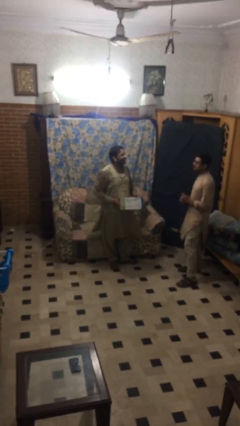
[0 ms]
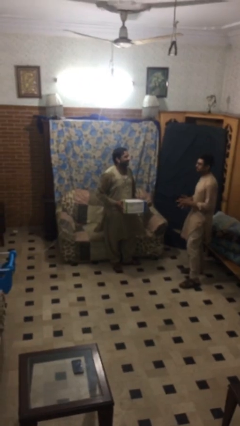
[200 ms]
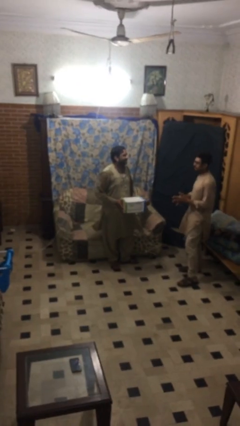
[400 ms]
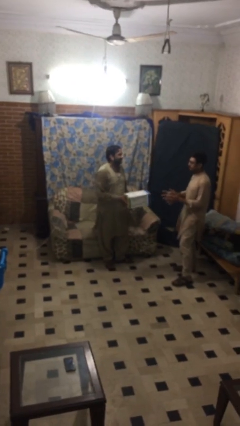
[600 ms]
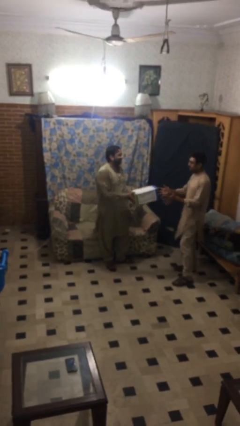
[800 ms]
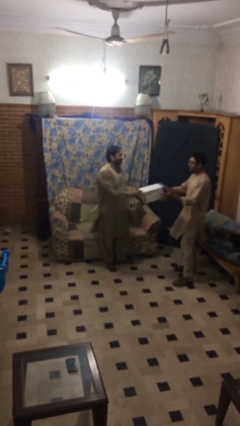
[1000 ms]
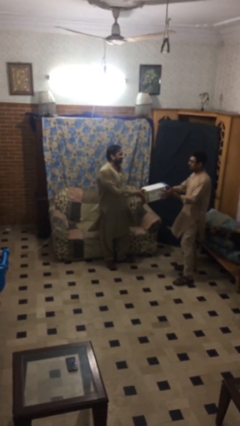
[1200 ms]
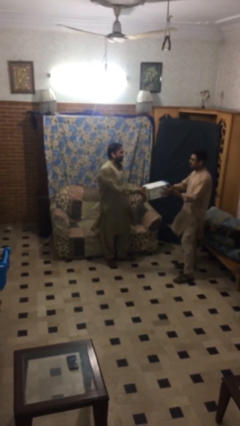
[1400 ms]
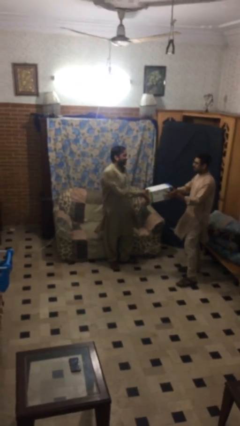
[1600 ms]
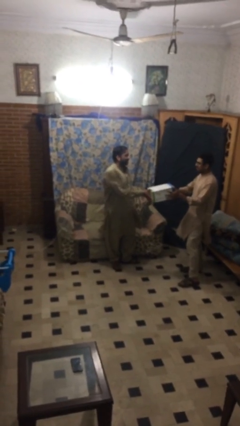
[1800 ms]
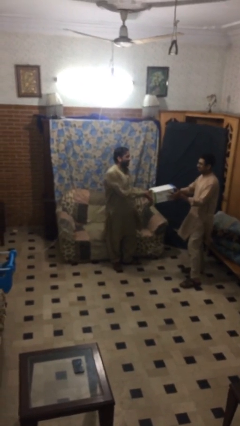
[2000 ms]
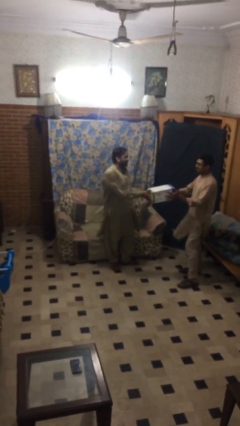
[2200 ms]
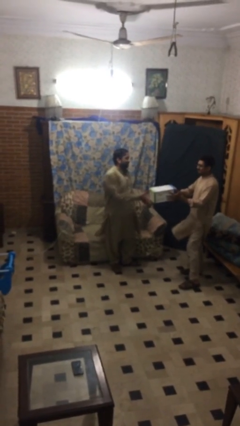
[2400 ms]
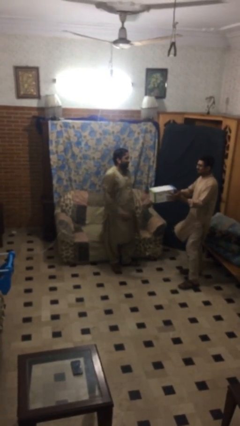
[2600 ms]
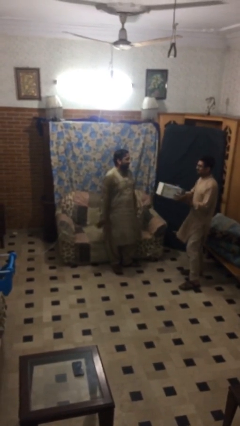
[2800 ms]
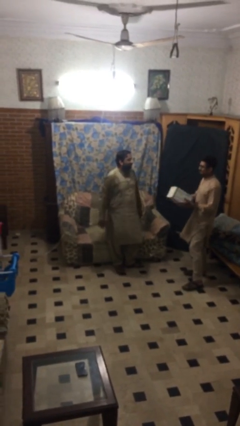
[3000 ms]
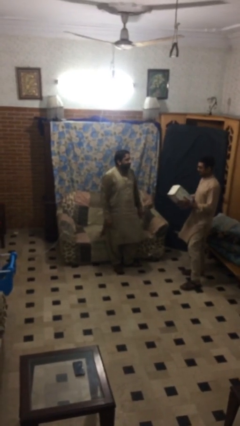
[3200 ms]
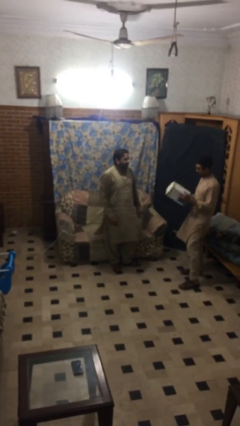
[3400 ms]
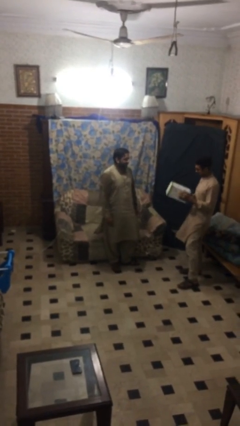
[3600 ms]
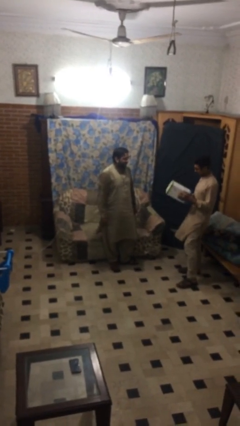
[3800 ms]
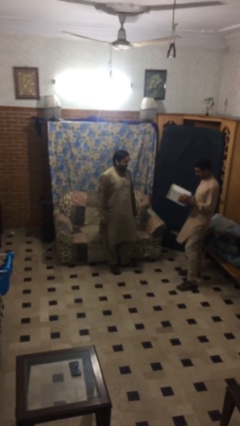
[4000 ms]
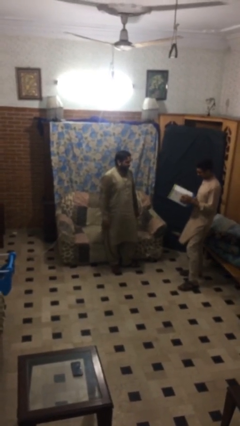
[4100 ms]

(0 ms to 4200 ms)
person transfers object to person

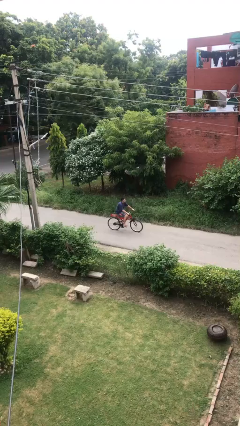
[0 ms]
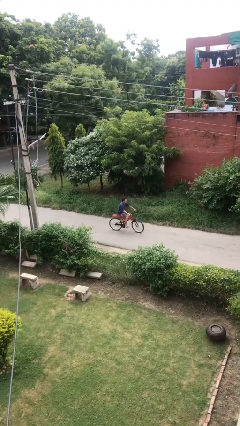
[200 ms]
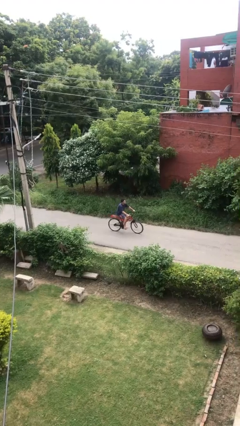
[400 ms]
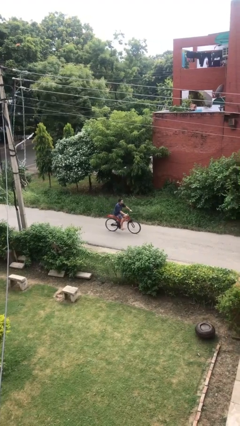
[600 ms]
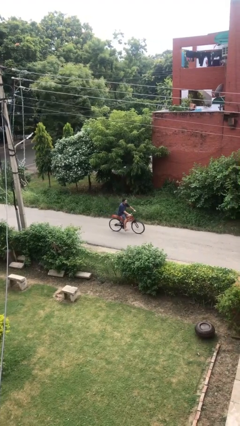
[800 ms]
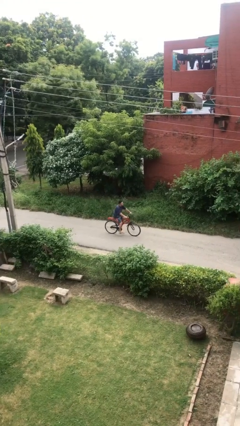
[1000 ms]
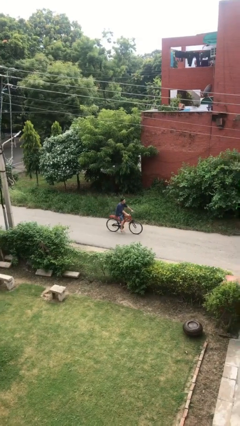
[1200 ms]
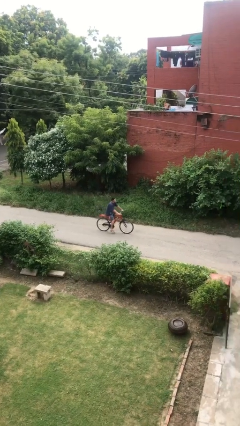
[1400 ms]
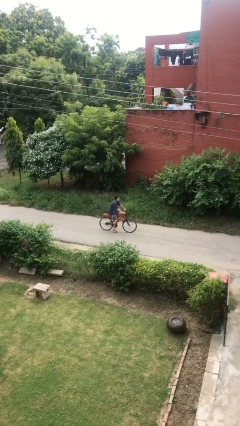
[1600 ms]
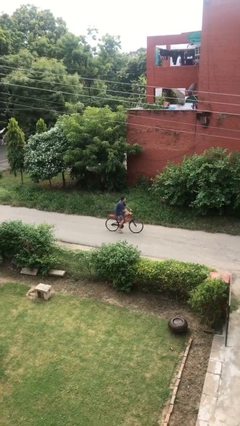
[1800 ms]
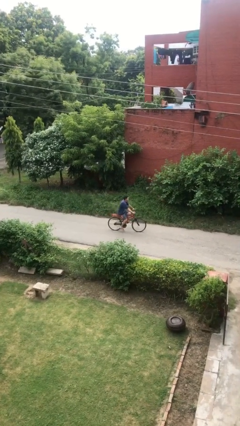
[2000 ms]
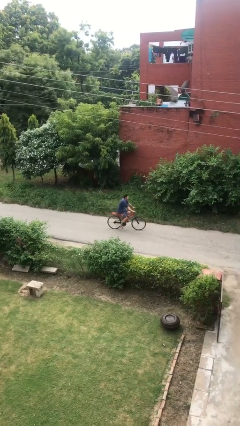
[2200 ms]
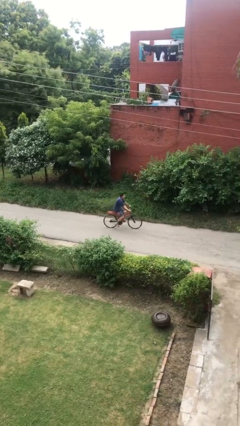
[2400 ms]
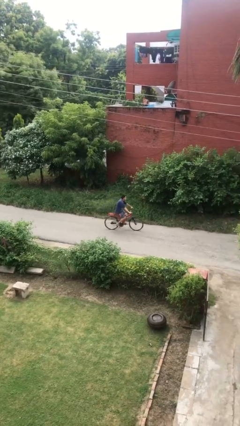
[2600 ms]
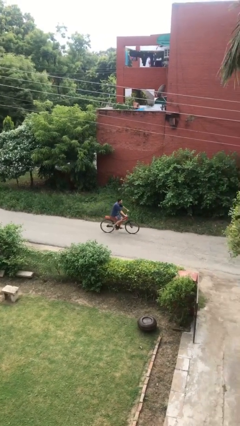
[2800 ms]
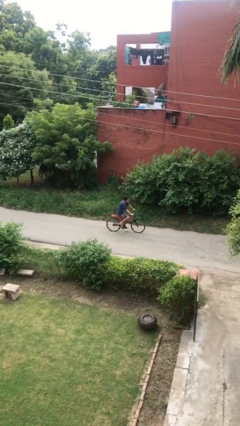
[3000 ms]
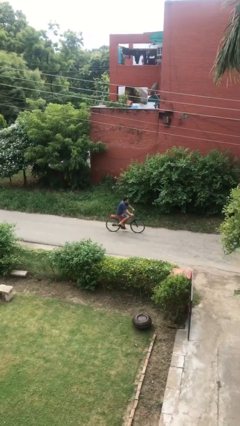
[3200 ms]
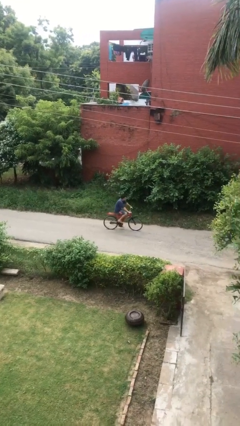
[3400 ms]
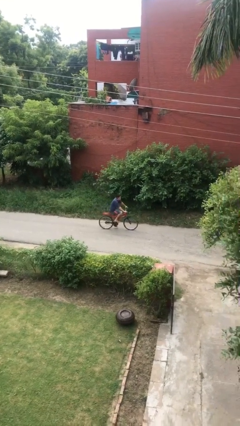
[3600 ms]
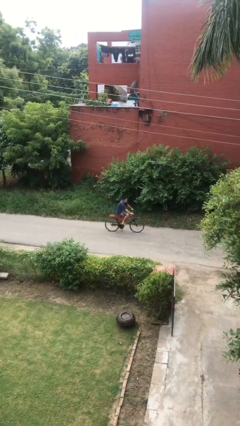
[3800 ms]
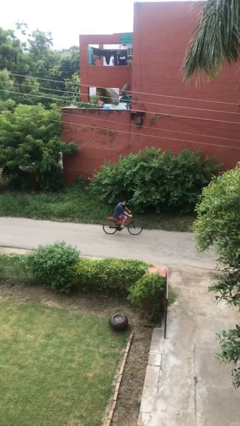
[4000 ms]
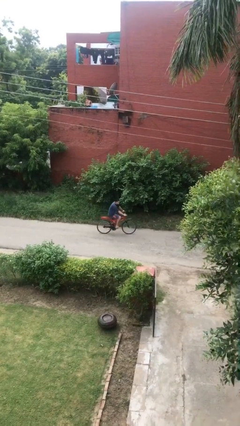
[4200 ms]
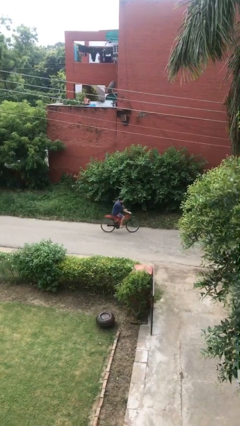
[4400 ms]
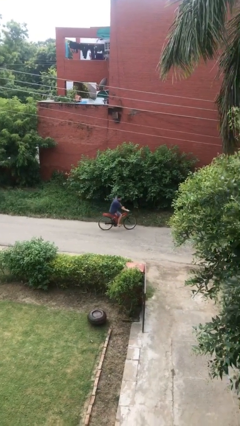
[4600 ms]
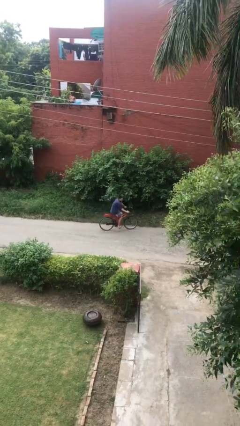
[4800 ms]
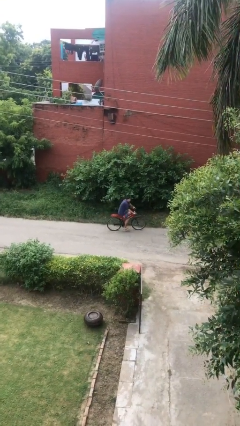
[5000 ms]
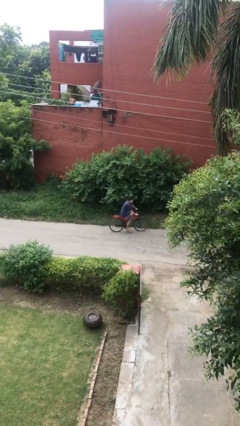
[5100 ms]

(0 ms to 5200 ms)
person rides bicycle

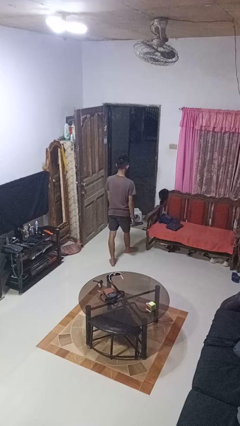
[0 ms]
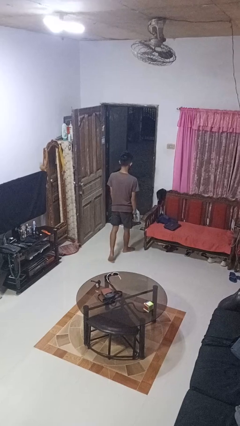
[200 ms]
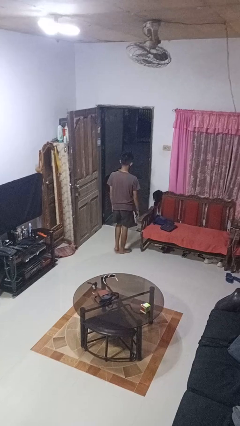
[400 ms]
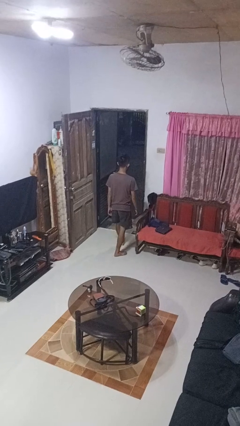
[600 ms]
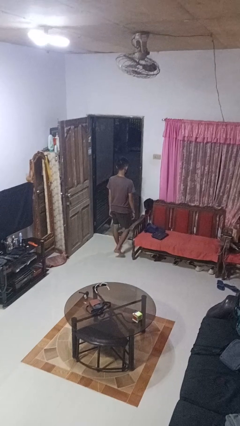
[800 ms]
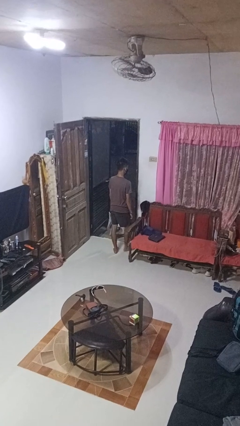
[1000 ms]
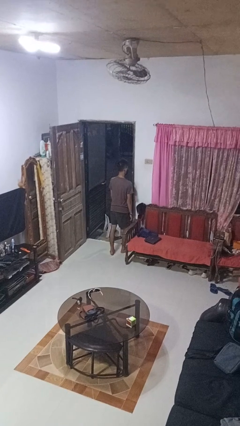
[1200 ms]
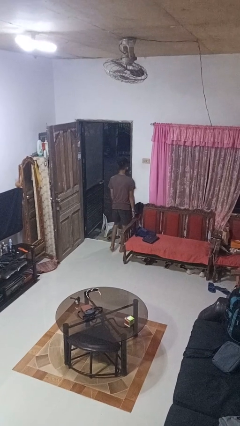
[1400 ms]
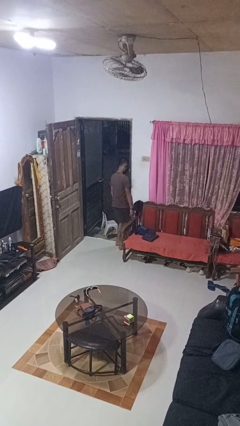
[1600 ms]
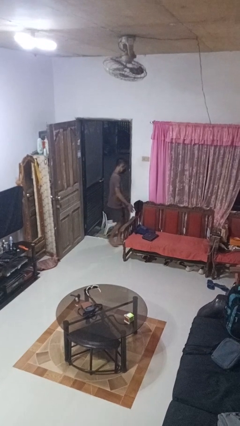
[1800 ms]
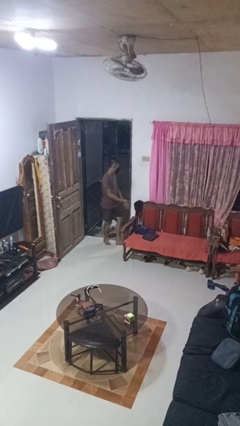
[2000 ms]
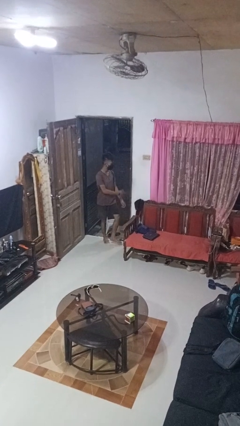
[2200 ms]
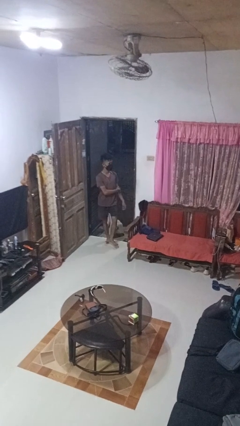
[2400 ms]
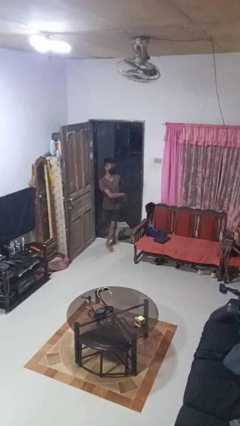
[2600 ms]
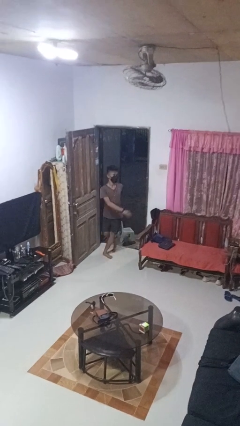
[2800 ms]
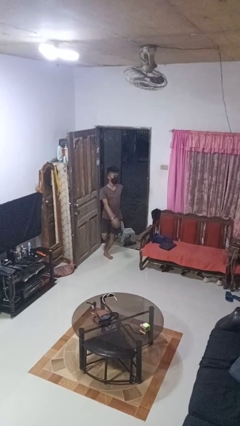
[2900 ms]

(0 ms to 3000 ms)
person bumps into wall

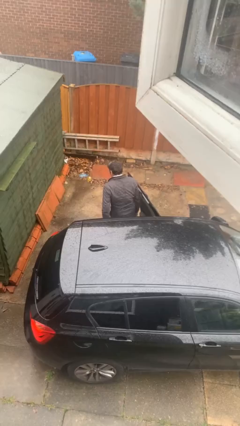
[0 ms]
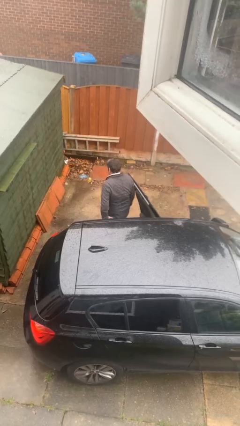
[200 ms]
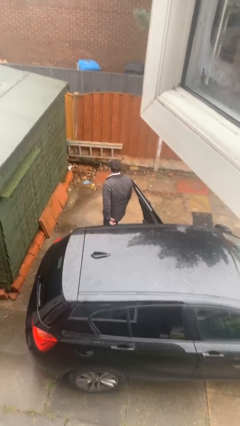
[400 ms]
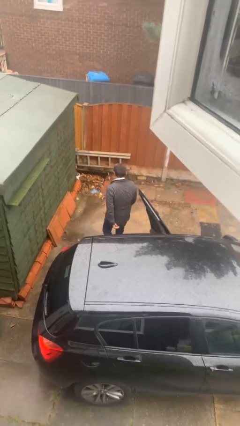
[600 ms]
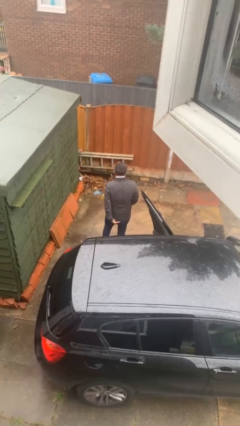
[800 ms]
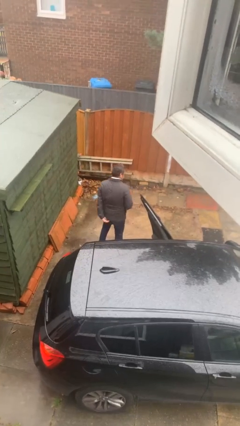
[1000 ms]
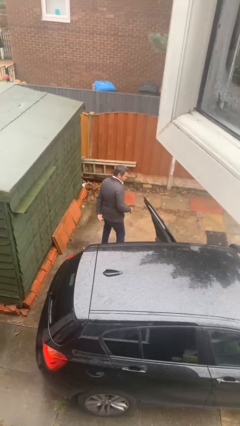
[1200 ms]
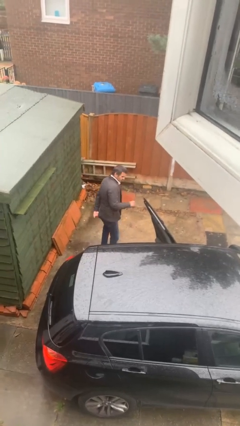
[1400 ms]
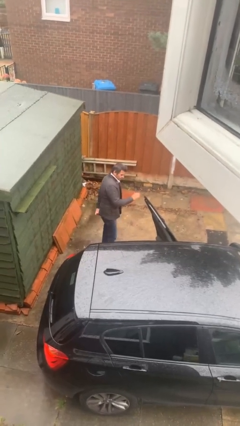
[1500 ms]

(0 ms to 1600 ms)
person exits car

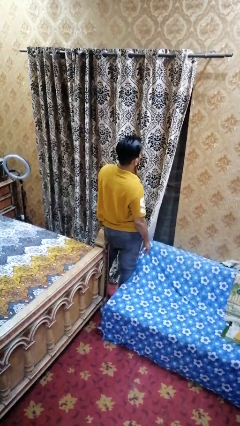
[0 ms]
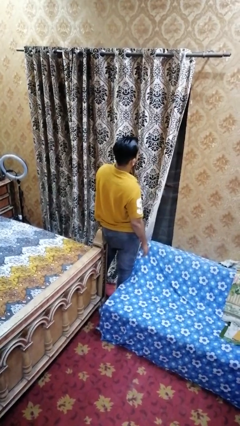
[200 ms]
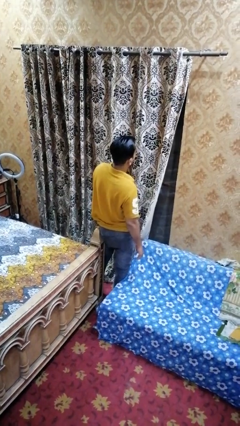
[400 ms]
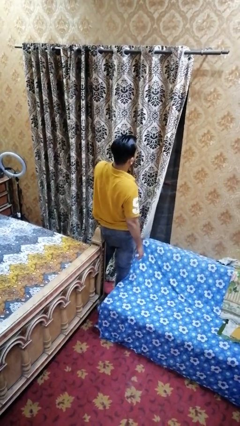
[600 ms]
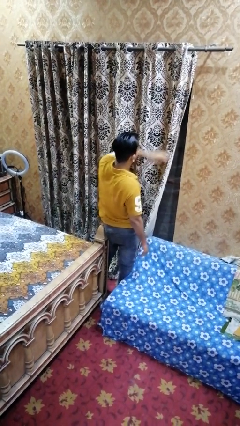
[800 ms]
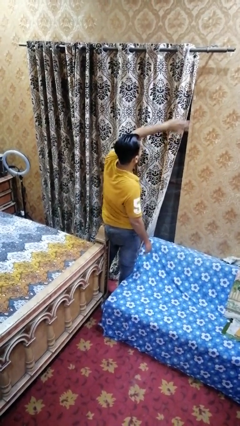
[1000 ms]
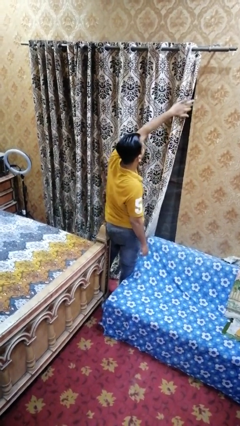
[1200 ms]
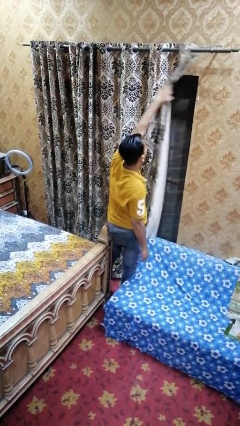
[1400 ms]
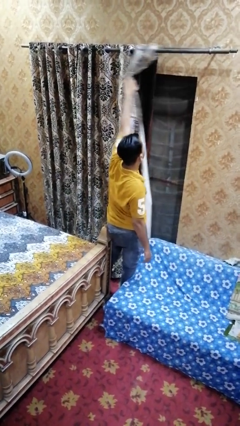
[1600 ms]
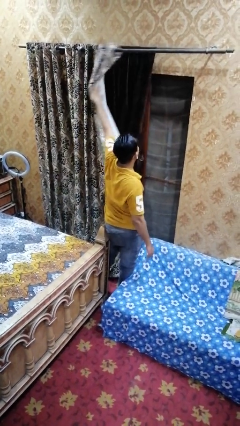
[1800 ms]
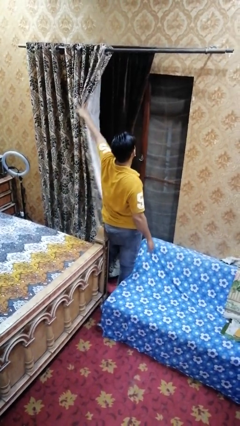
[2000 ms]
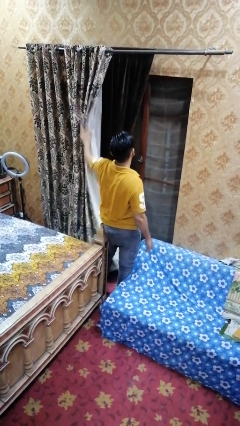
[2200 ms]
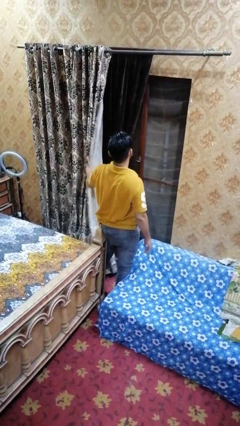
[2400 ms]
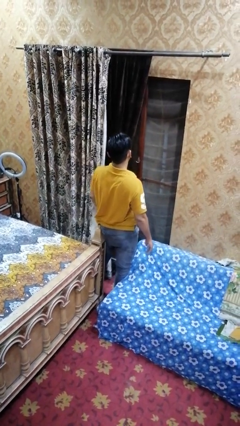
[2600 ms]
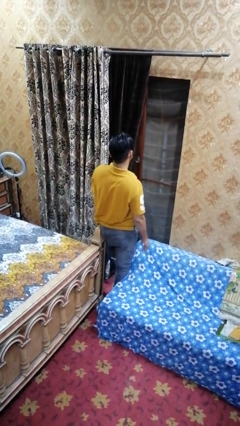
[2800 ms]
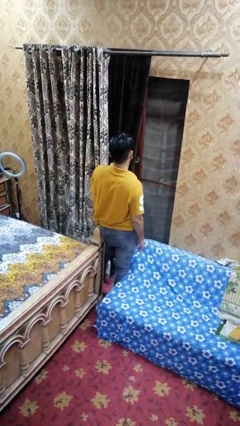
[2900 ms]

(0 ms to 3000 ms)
person opens curtains

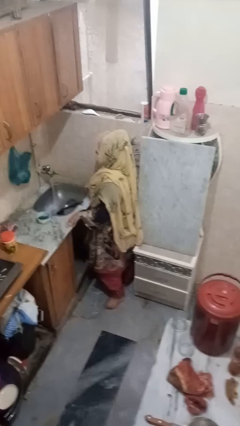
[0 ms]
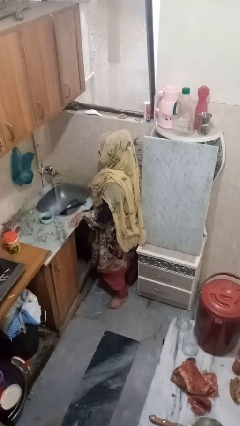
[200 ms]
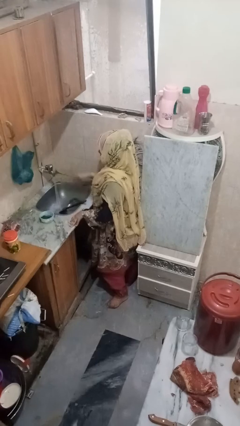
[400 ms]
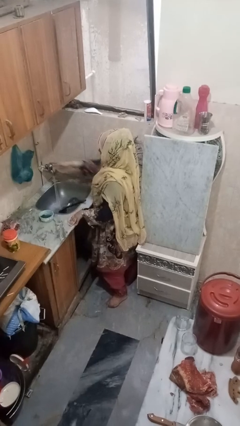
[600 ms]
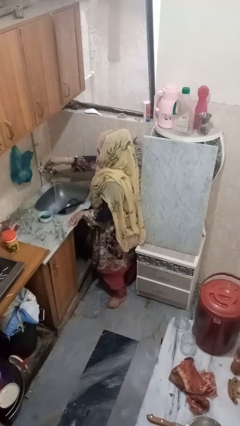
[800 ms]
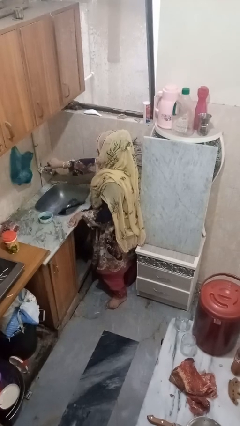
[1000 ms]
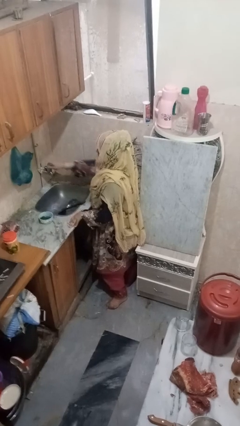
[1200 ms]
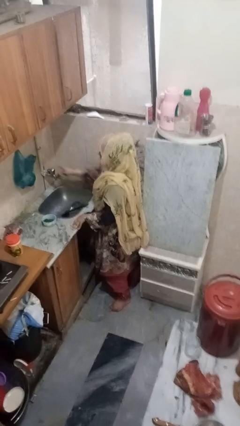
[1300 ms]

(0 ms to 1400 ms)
person turns off faucet
